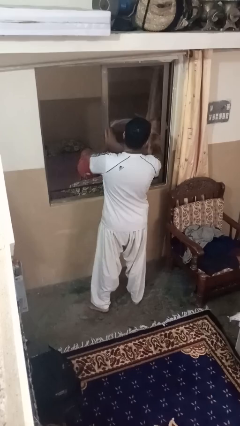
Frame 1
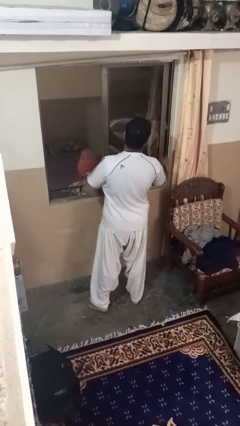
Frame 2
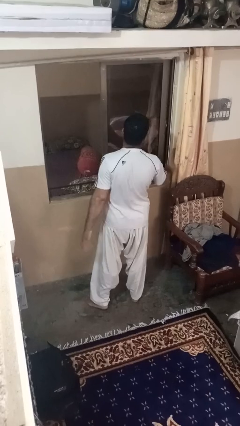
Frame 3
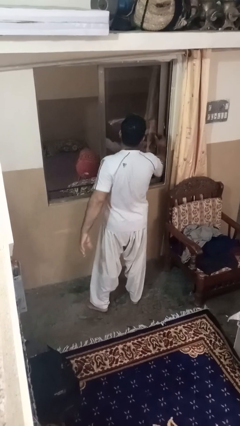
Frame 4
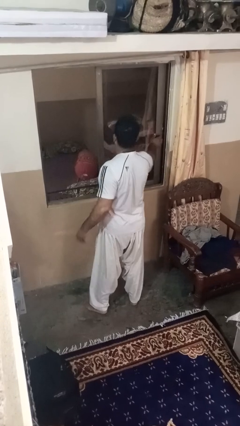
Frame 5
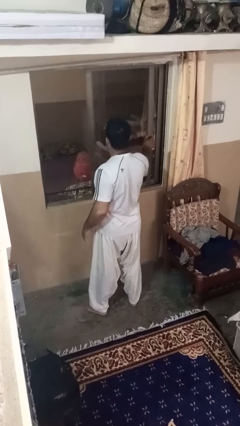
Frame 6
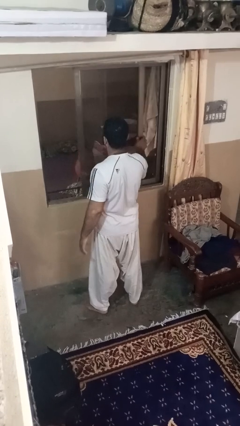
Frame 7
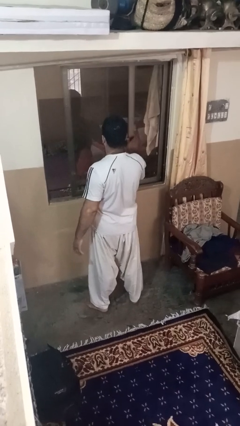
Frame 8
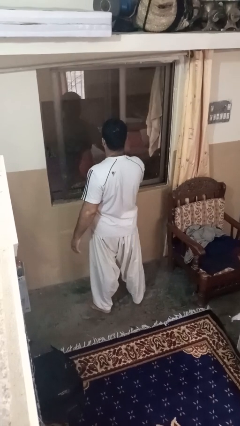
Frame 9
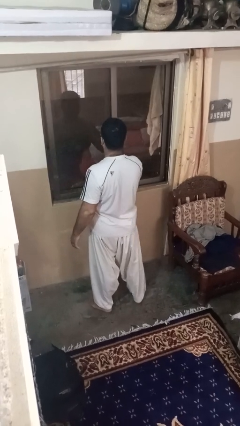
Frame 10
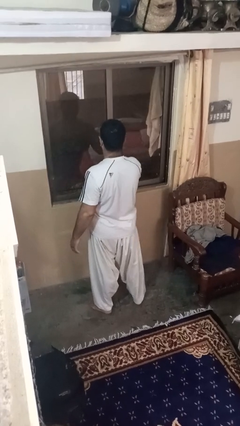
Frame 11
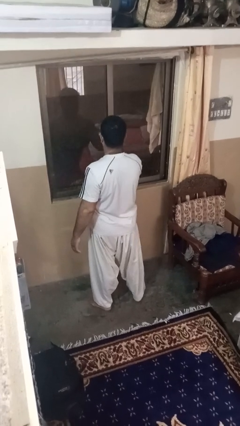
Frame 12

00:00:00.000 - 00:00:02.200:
person closes home window

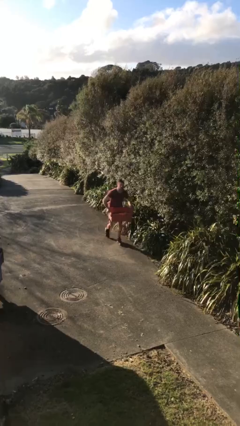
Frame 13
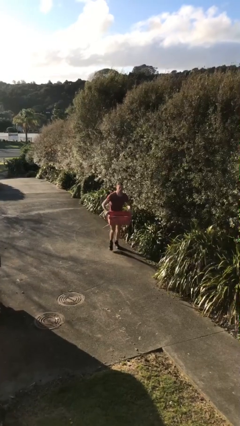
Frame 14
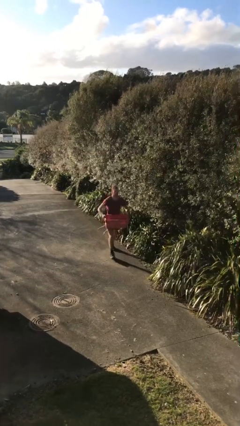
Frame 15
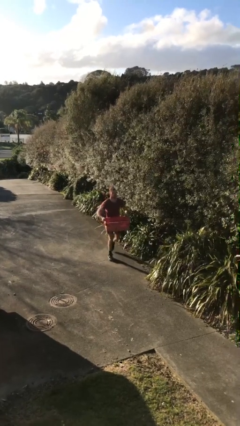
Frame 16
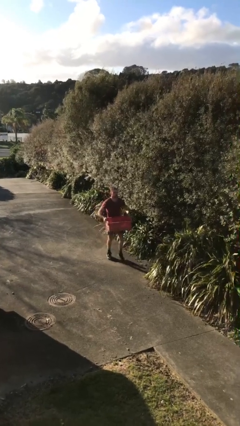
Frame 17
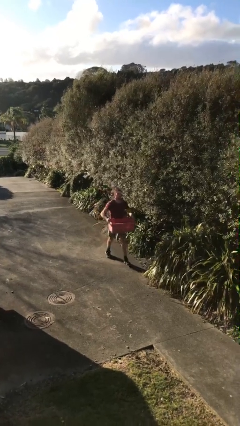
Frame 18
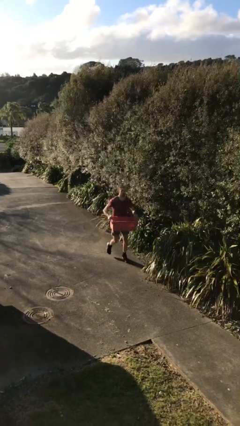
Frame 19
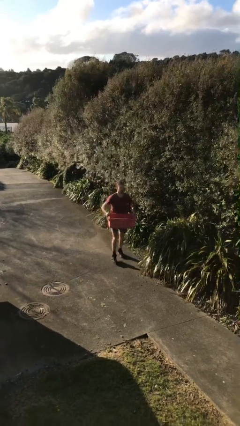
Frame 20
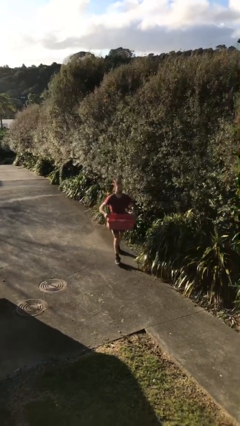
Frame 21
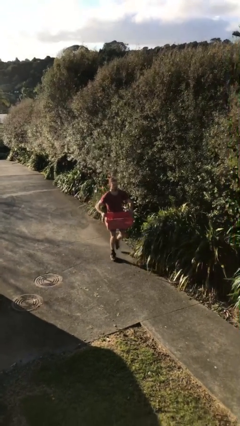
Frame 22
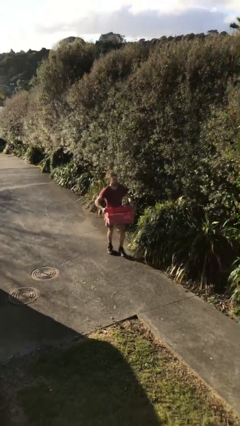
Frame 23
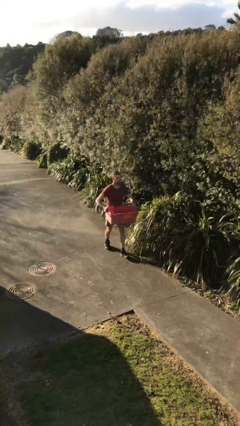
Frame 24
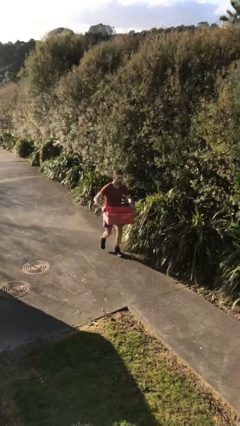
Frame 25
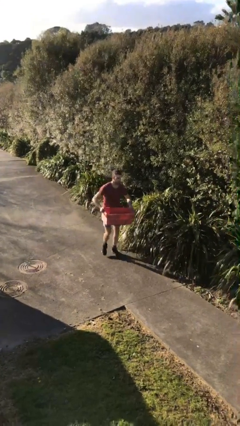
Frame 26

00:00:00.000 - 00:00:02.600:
person carries heavy object

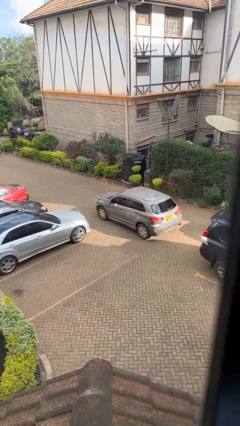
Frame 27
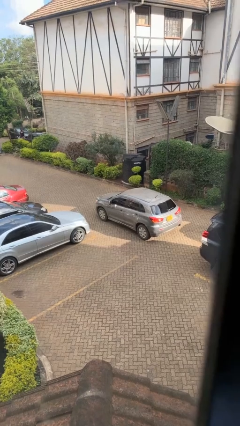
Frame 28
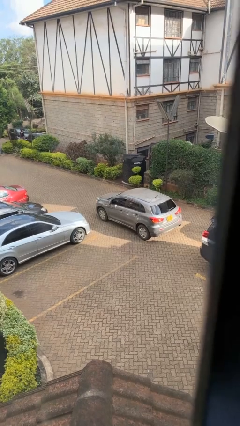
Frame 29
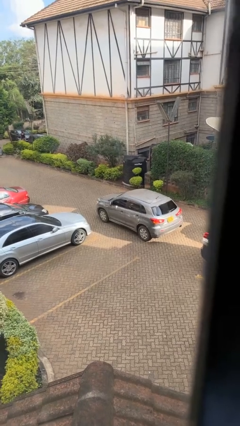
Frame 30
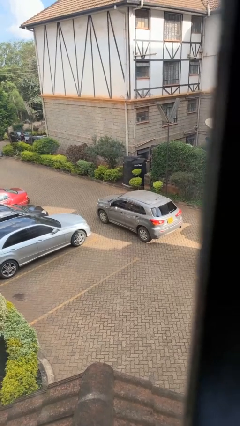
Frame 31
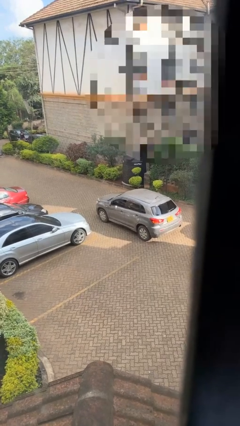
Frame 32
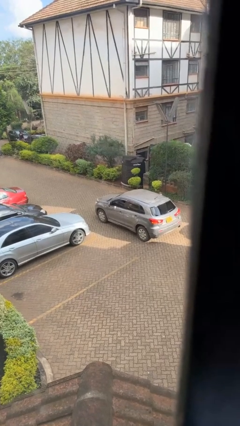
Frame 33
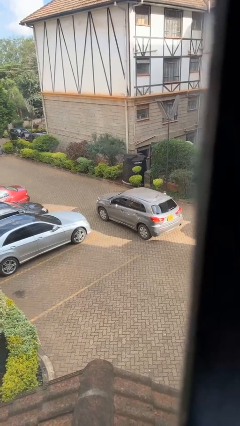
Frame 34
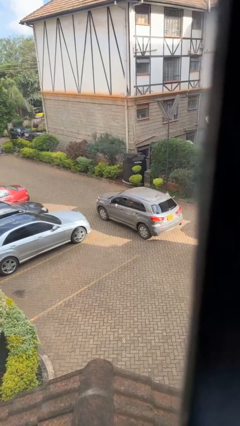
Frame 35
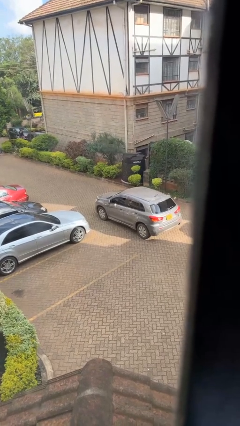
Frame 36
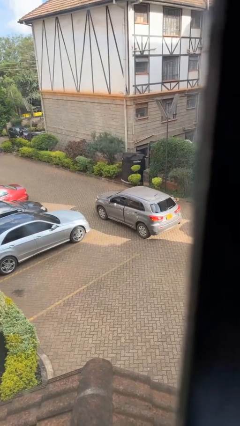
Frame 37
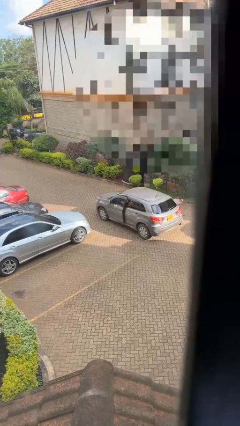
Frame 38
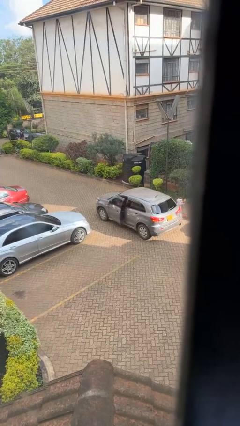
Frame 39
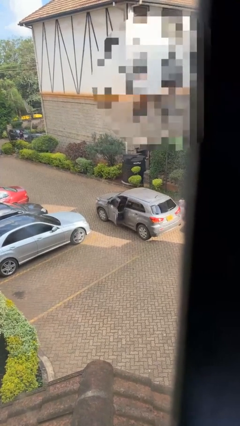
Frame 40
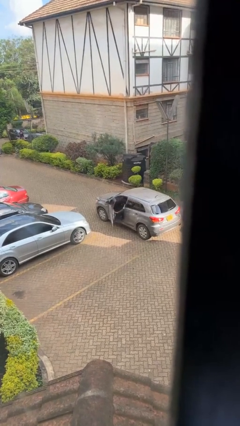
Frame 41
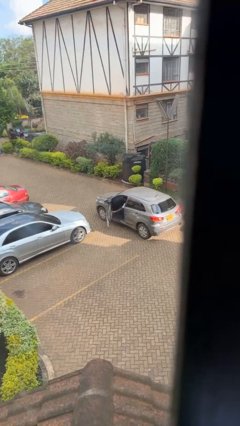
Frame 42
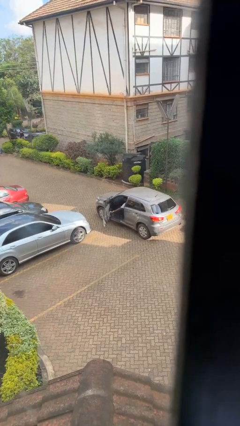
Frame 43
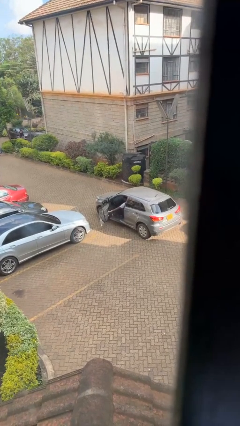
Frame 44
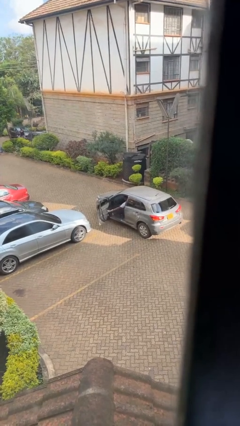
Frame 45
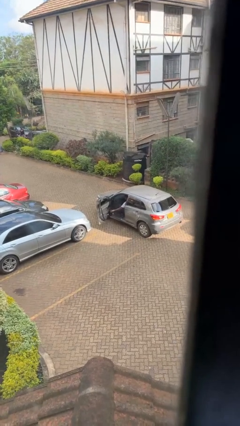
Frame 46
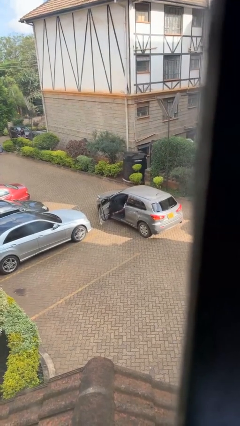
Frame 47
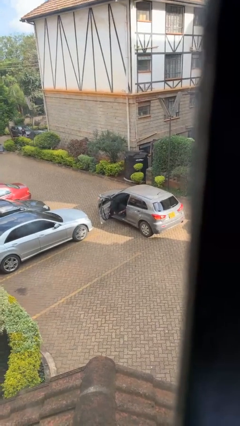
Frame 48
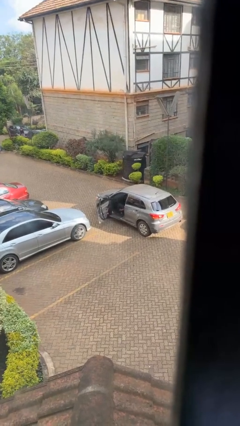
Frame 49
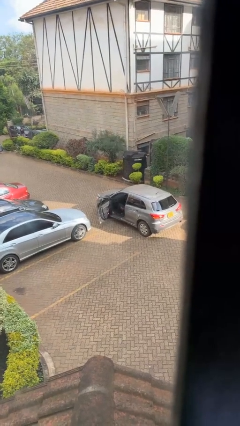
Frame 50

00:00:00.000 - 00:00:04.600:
person opens car door

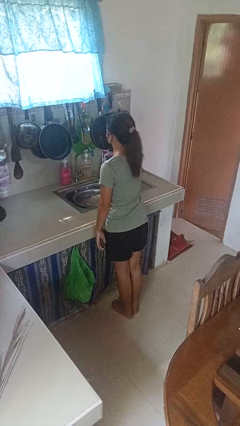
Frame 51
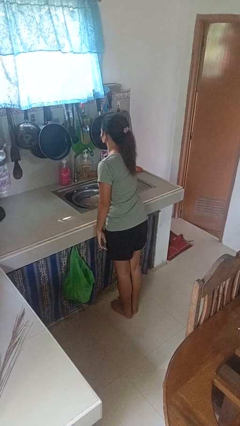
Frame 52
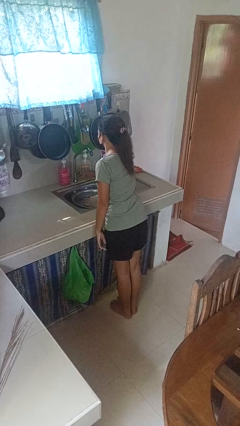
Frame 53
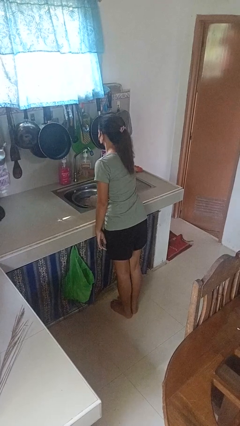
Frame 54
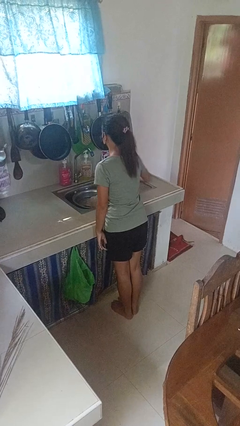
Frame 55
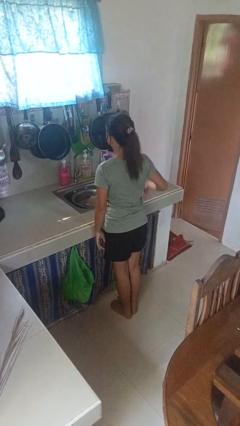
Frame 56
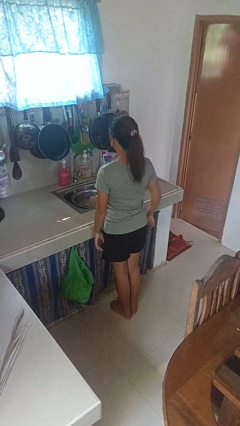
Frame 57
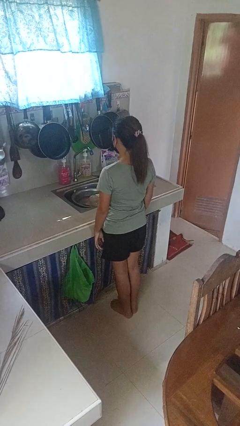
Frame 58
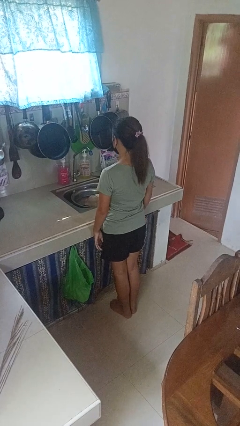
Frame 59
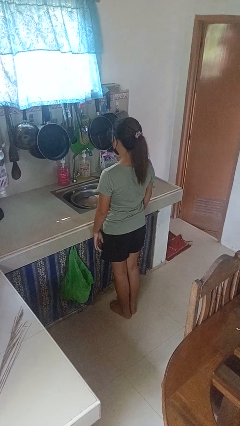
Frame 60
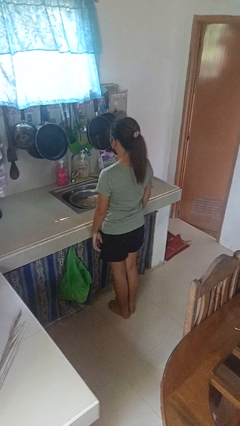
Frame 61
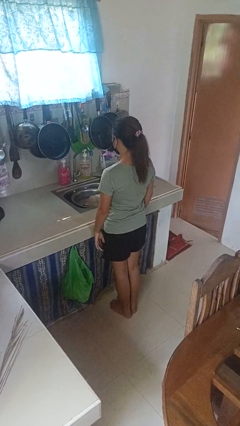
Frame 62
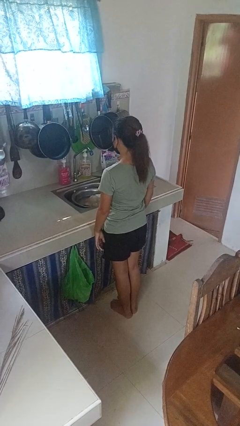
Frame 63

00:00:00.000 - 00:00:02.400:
person turns off faucet

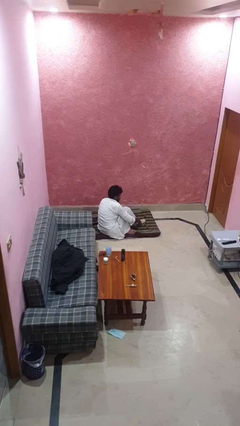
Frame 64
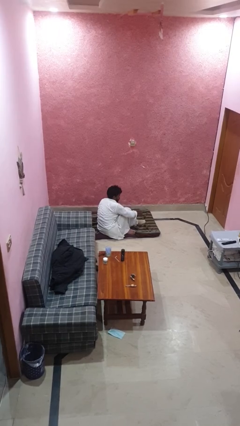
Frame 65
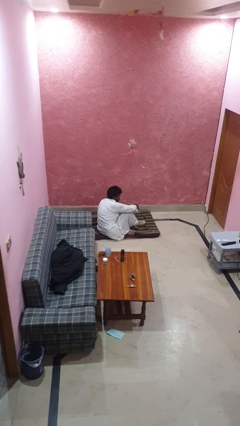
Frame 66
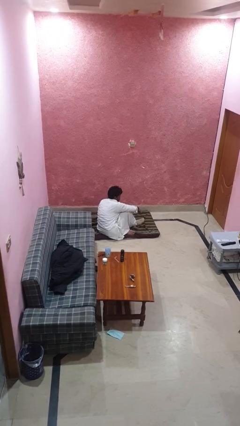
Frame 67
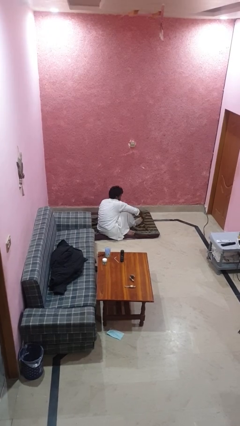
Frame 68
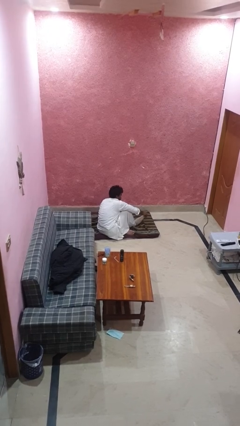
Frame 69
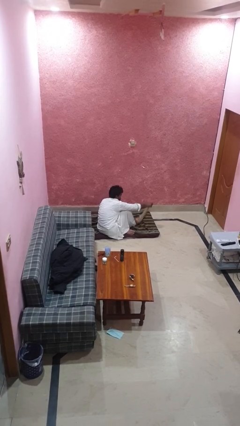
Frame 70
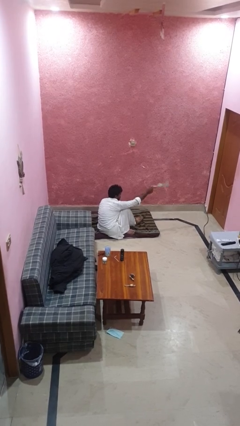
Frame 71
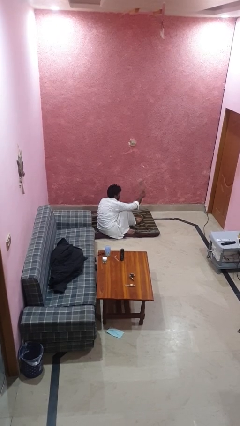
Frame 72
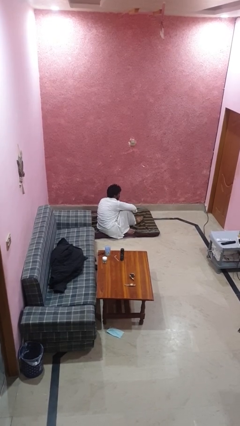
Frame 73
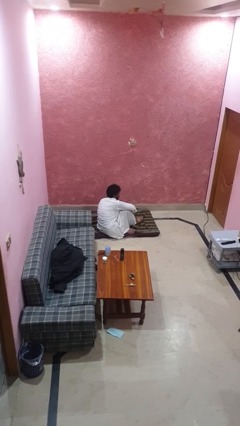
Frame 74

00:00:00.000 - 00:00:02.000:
person takes off socks

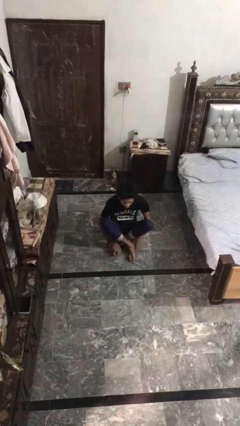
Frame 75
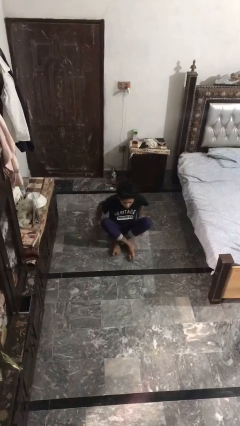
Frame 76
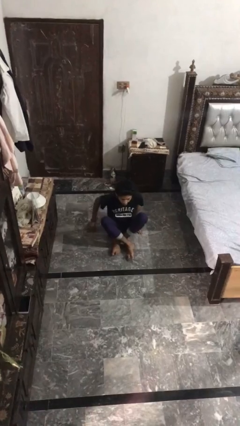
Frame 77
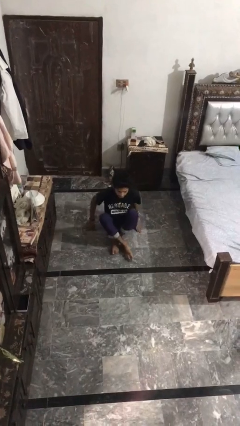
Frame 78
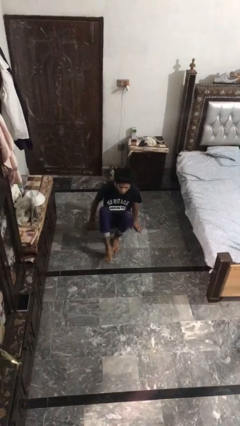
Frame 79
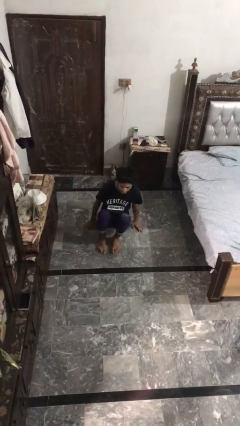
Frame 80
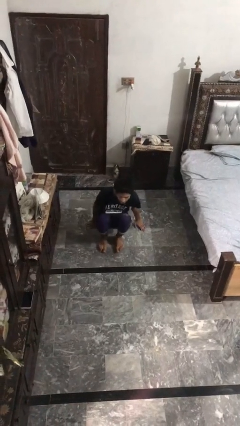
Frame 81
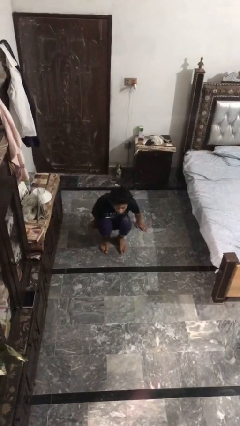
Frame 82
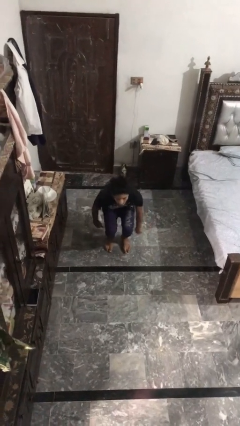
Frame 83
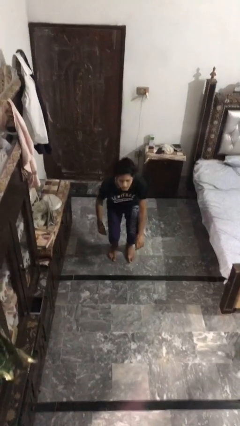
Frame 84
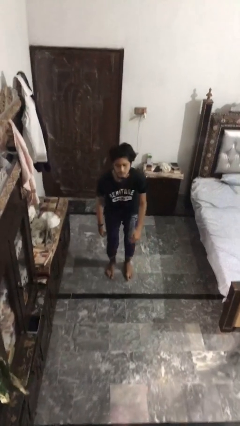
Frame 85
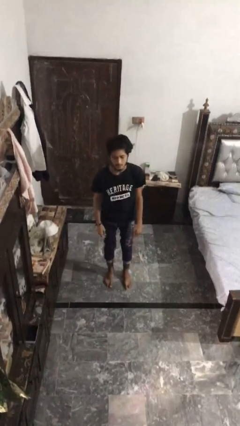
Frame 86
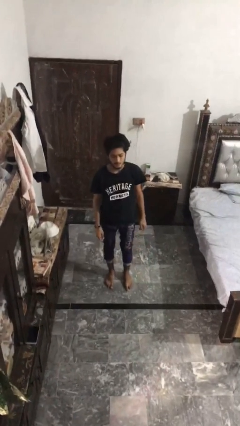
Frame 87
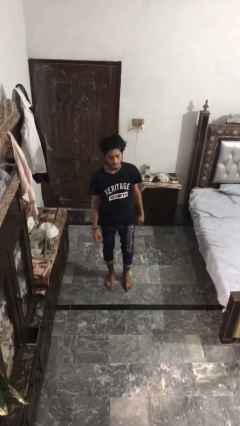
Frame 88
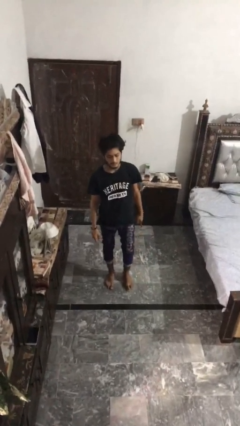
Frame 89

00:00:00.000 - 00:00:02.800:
person stands up from floor

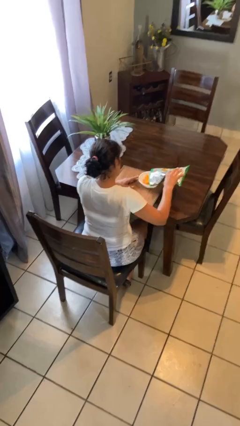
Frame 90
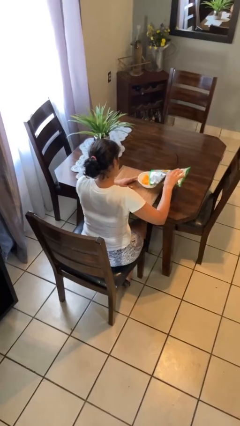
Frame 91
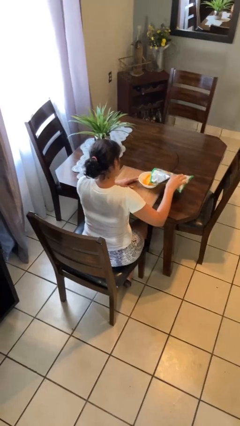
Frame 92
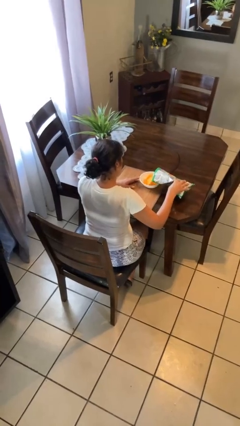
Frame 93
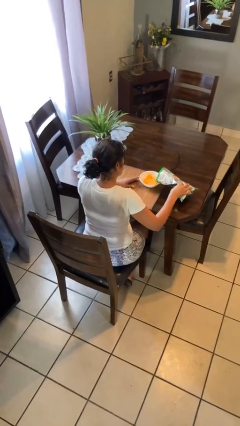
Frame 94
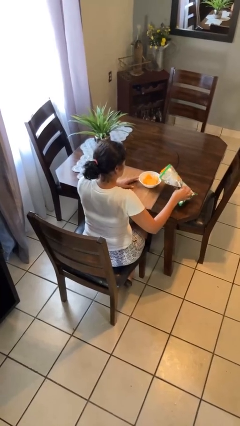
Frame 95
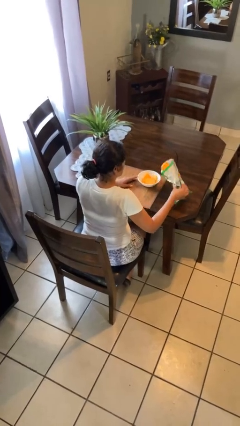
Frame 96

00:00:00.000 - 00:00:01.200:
person pours into bowl
